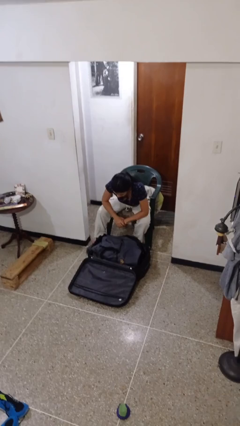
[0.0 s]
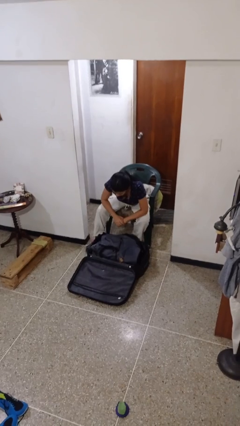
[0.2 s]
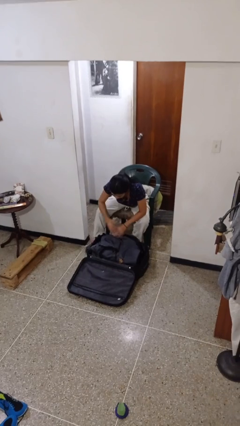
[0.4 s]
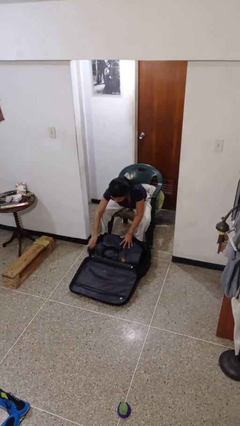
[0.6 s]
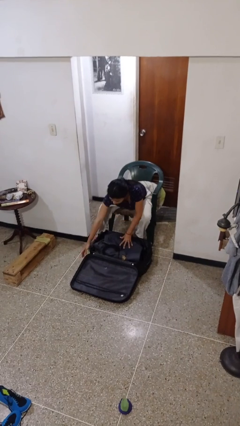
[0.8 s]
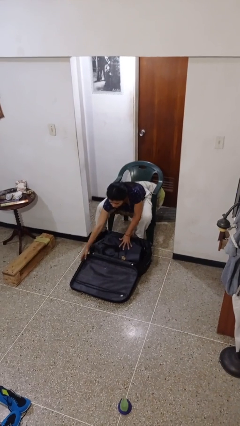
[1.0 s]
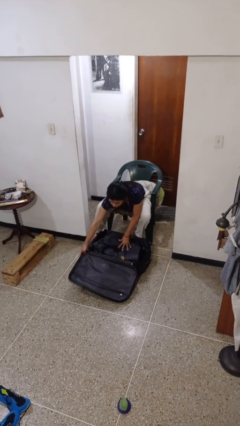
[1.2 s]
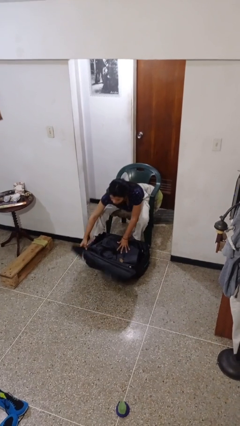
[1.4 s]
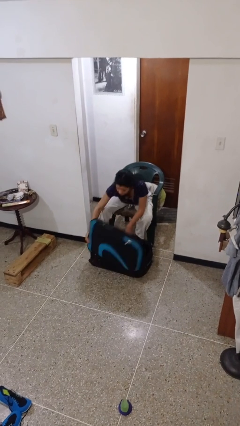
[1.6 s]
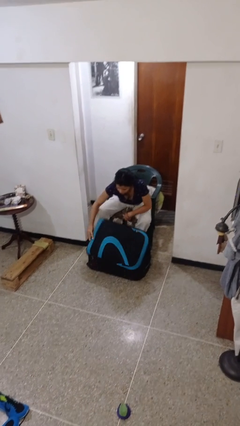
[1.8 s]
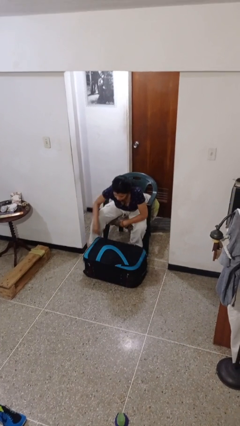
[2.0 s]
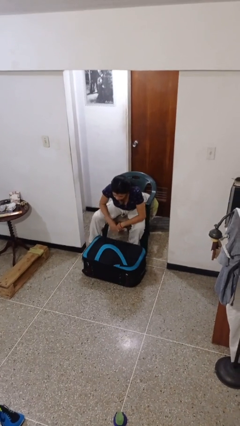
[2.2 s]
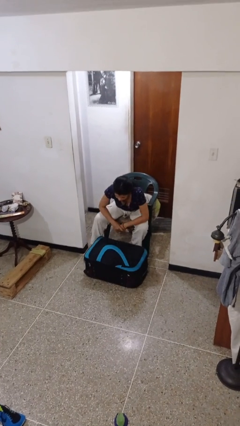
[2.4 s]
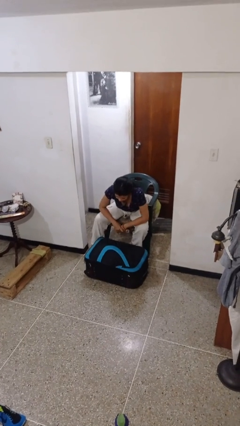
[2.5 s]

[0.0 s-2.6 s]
person closes suitcase

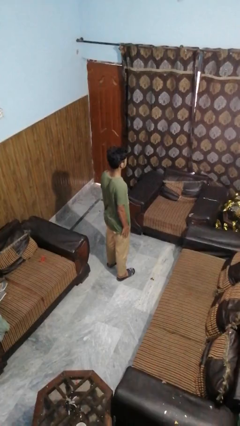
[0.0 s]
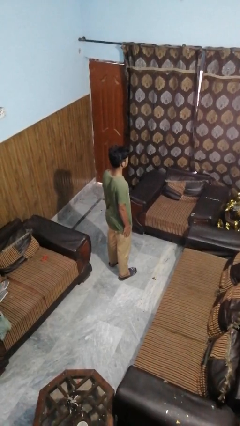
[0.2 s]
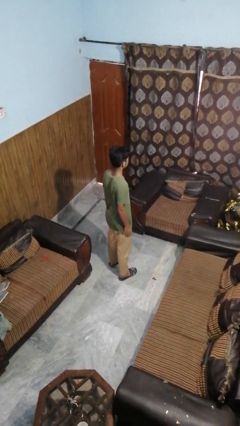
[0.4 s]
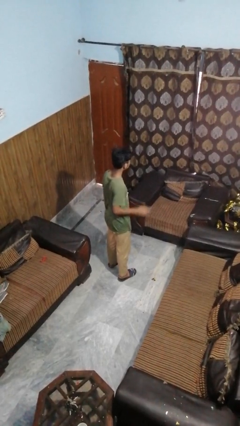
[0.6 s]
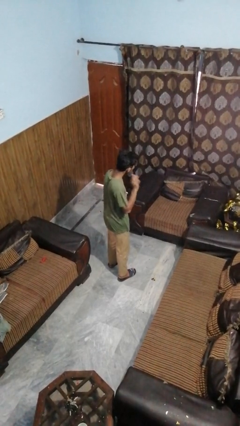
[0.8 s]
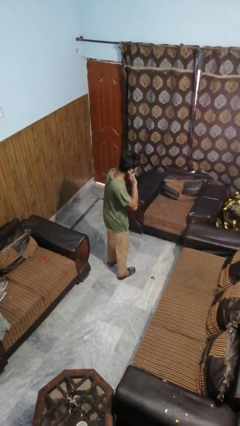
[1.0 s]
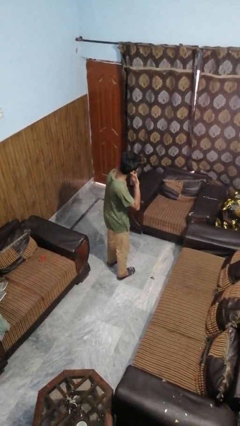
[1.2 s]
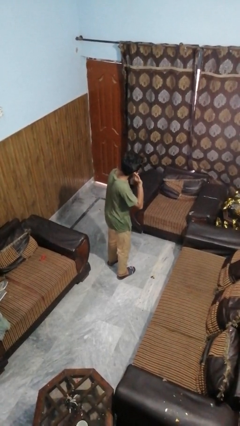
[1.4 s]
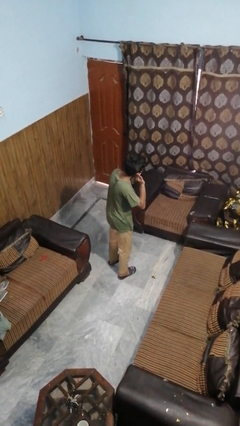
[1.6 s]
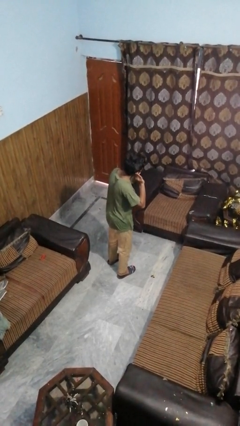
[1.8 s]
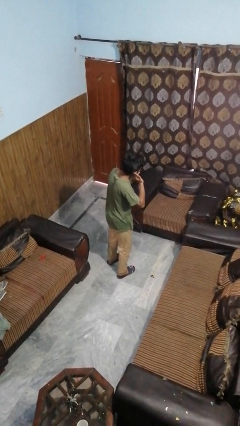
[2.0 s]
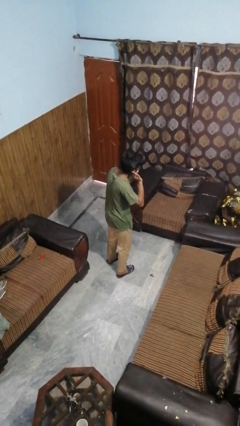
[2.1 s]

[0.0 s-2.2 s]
person gestures listen closely

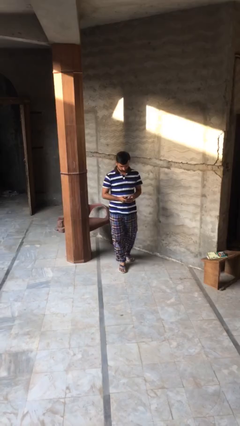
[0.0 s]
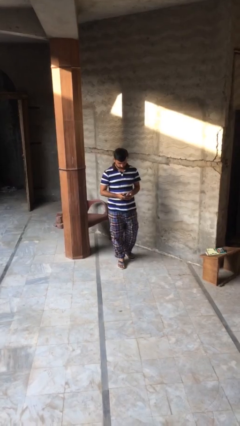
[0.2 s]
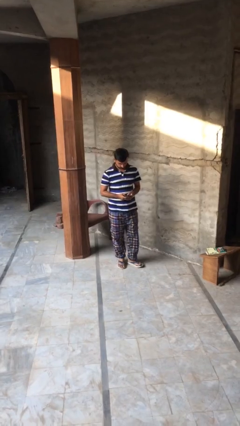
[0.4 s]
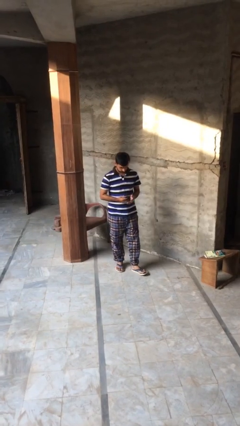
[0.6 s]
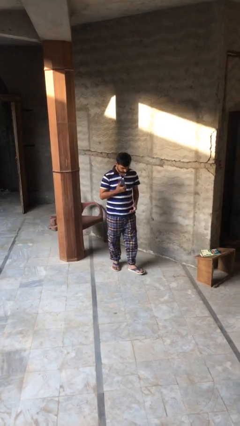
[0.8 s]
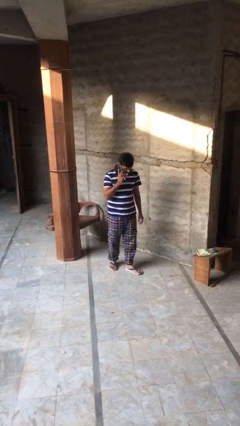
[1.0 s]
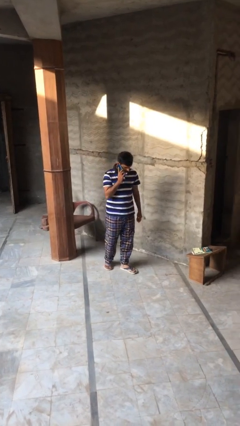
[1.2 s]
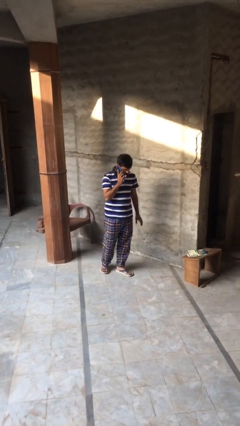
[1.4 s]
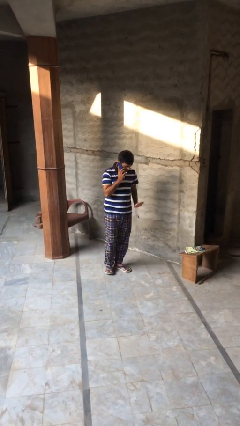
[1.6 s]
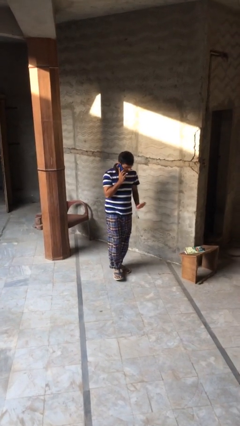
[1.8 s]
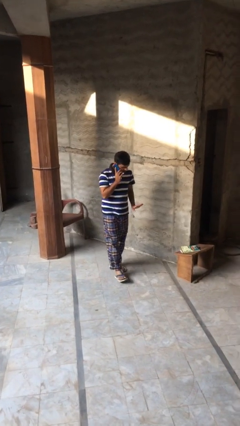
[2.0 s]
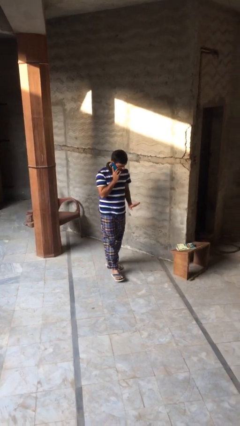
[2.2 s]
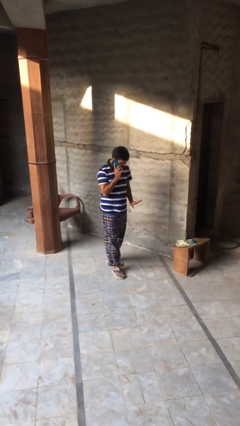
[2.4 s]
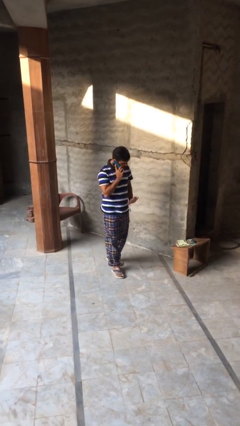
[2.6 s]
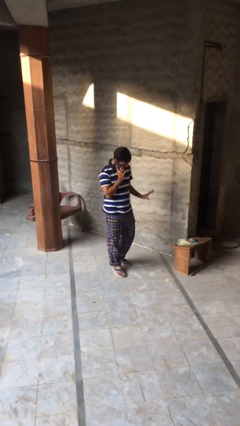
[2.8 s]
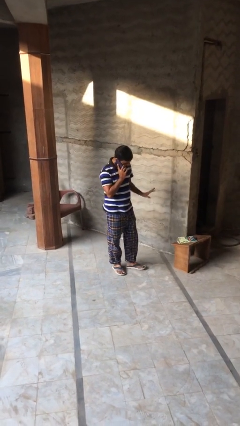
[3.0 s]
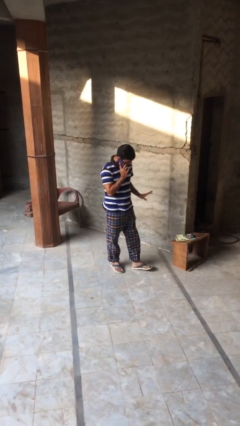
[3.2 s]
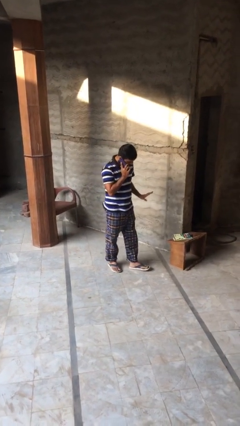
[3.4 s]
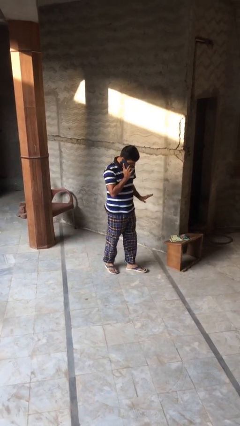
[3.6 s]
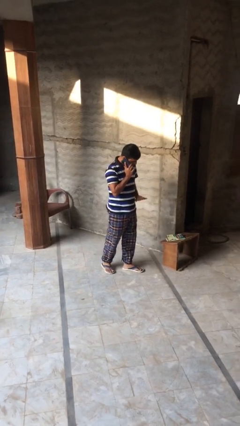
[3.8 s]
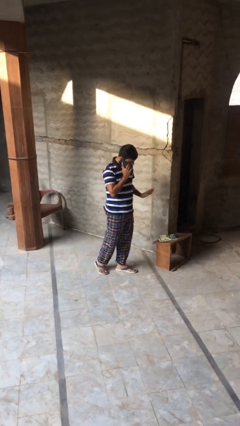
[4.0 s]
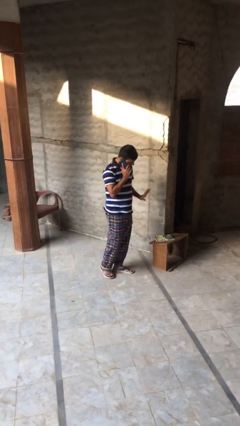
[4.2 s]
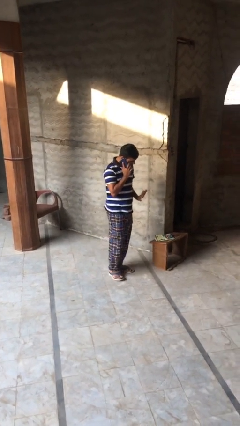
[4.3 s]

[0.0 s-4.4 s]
person talks on phone

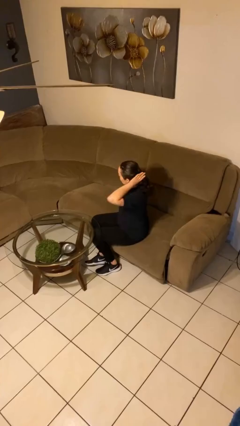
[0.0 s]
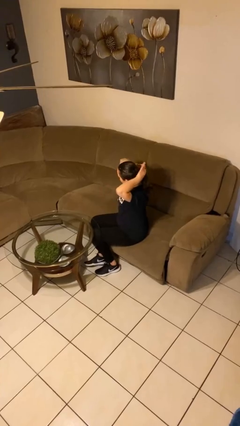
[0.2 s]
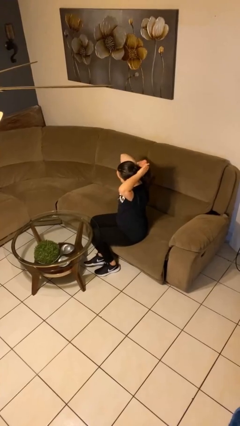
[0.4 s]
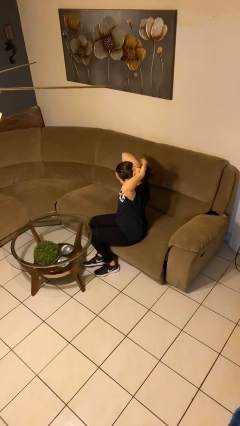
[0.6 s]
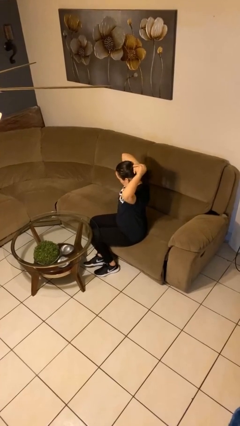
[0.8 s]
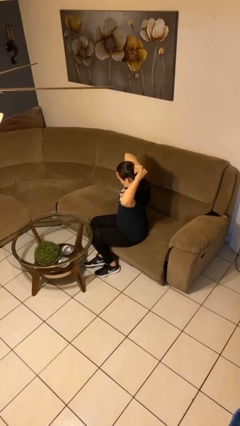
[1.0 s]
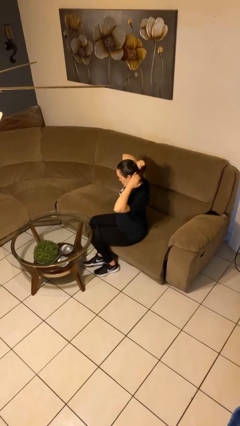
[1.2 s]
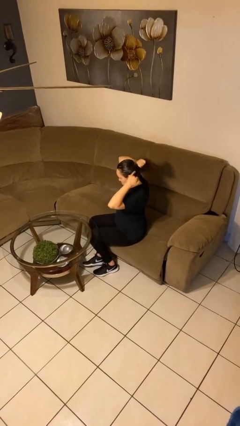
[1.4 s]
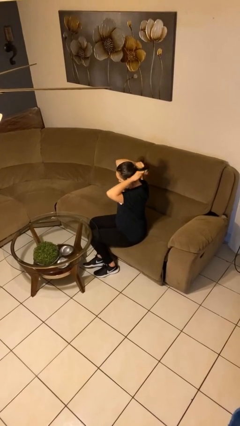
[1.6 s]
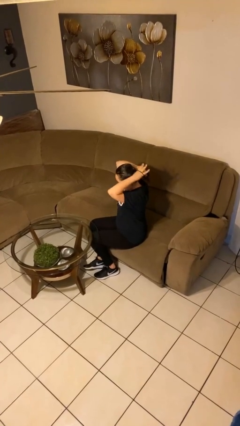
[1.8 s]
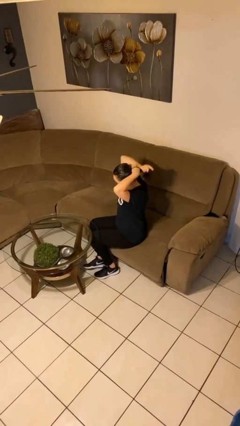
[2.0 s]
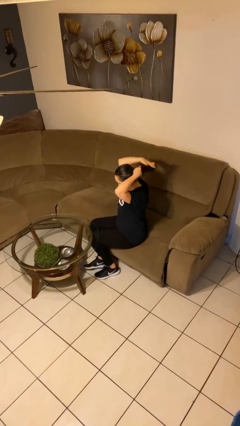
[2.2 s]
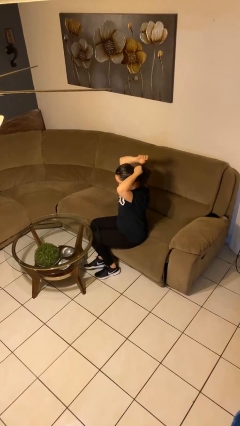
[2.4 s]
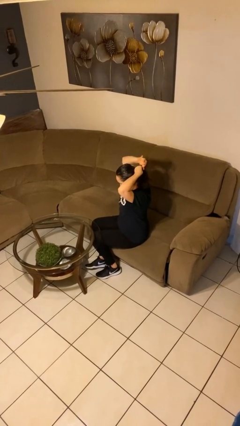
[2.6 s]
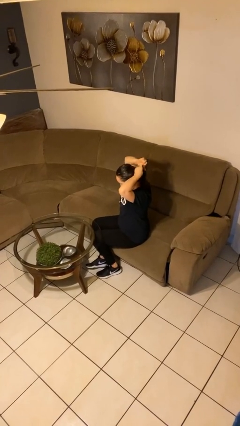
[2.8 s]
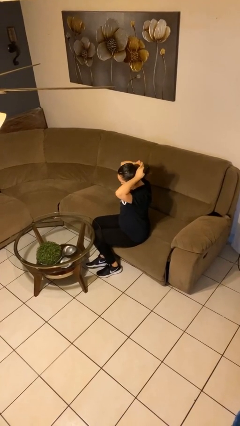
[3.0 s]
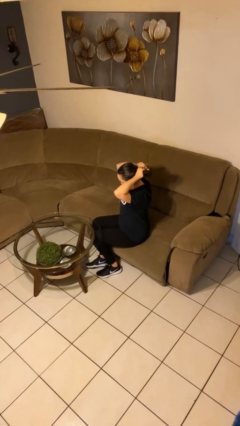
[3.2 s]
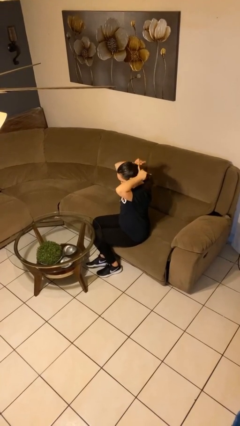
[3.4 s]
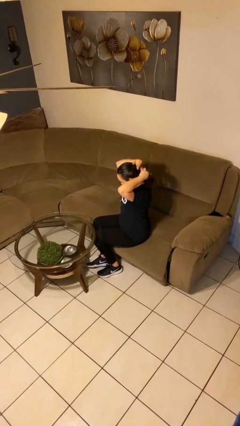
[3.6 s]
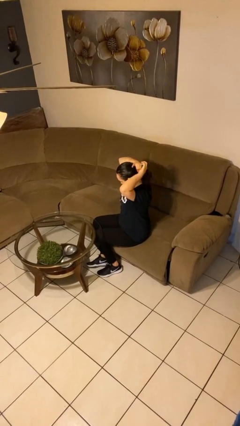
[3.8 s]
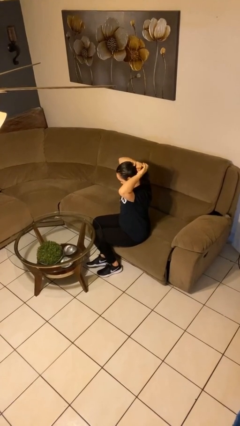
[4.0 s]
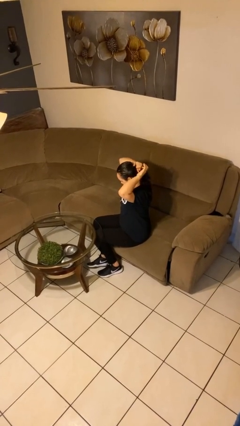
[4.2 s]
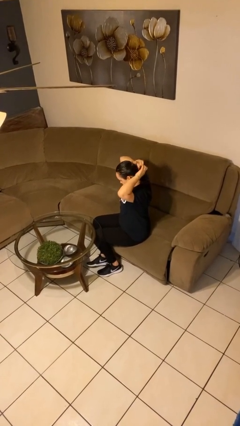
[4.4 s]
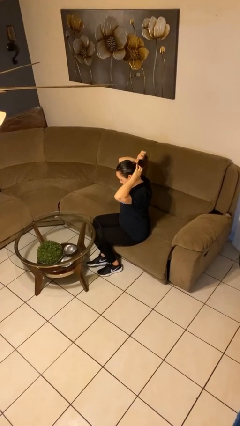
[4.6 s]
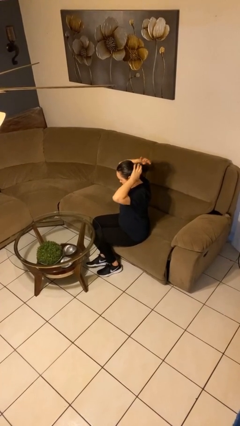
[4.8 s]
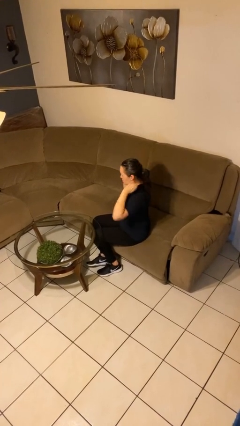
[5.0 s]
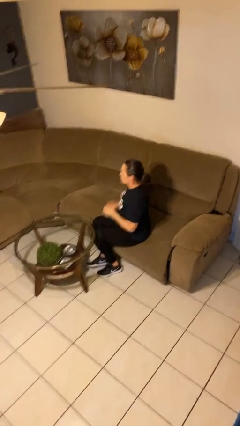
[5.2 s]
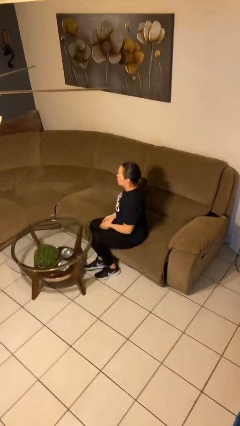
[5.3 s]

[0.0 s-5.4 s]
person puts hair in ponytail

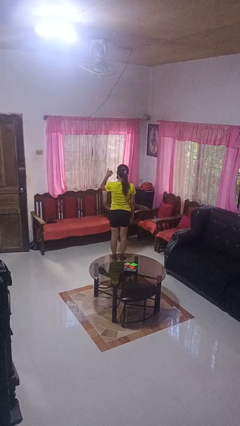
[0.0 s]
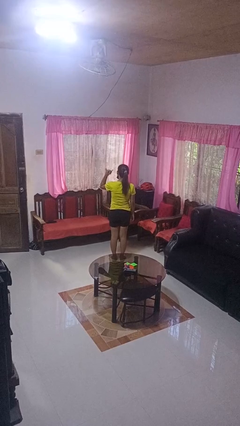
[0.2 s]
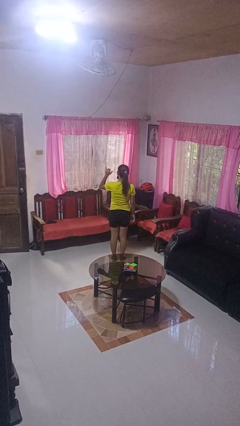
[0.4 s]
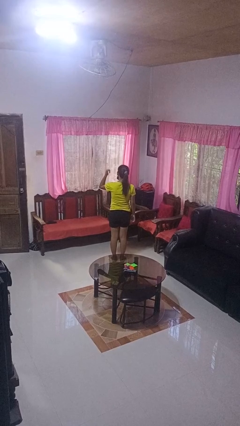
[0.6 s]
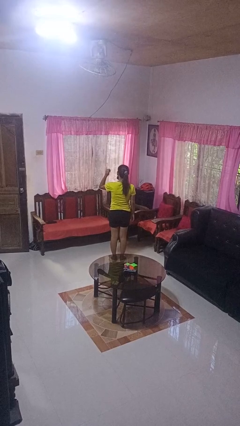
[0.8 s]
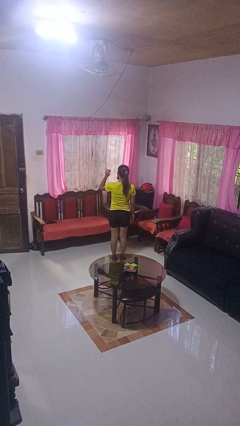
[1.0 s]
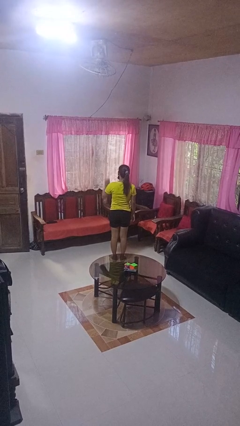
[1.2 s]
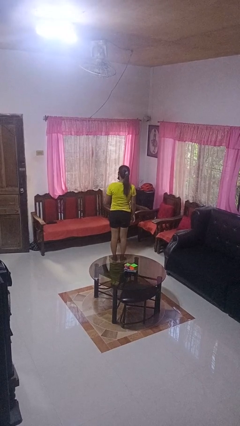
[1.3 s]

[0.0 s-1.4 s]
person gestures hang loose

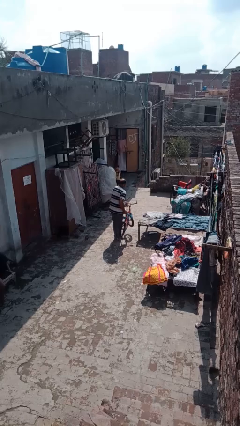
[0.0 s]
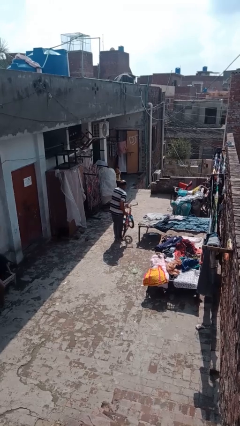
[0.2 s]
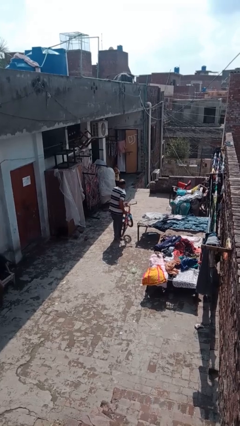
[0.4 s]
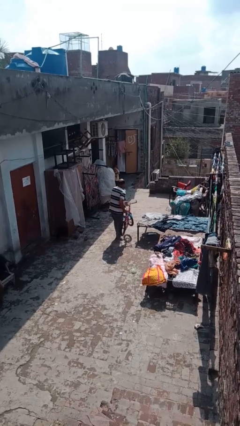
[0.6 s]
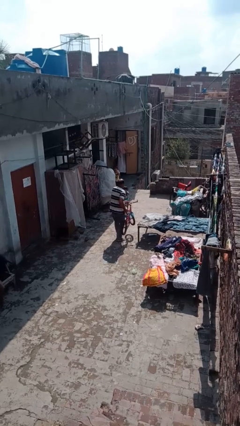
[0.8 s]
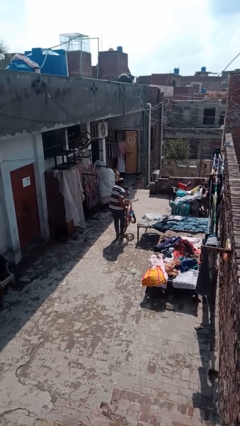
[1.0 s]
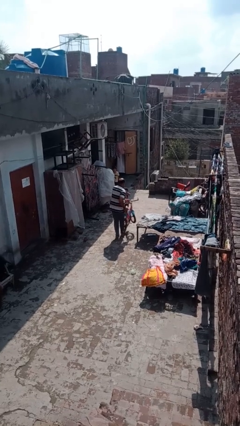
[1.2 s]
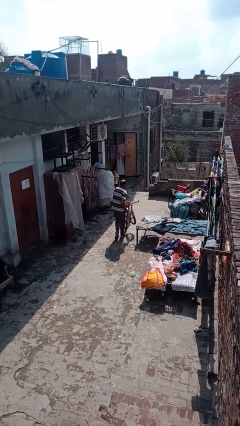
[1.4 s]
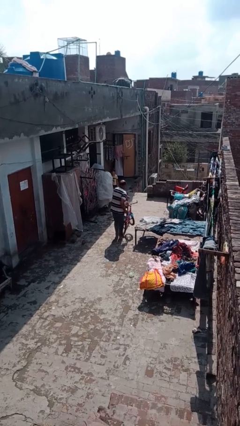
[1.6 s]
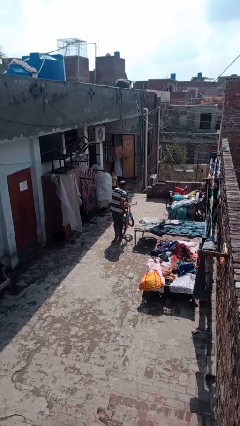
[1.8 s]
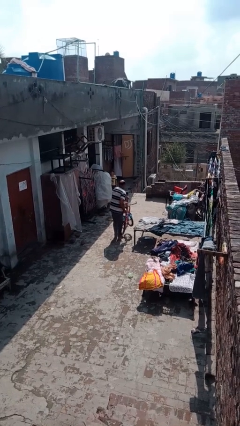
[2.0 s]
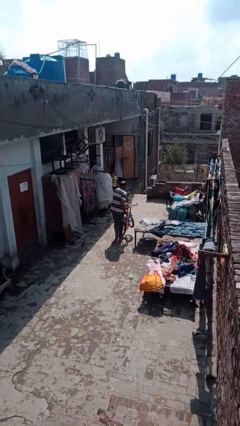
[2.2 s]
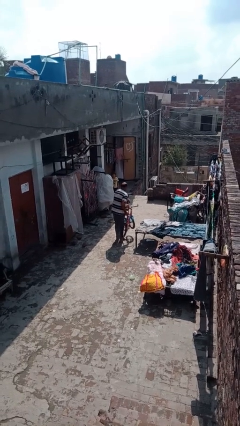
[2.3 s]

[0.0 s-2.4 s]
person carries bicycle
